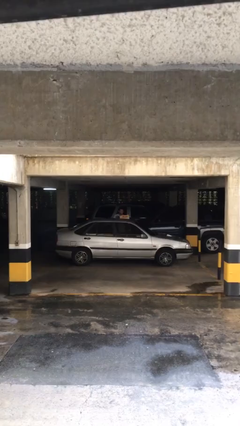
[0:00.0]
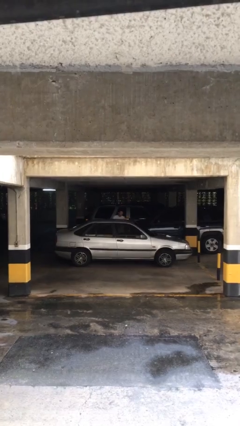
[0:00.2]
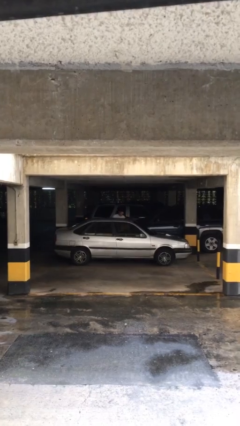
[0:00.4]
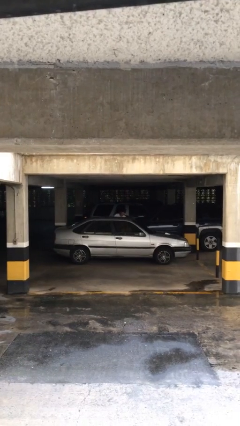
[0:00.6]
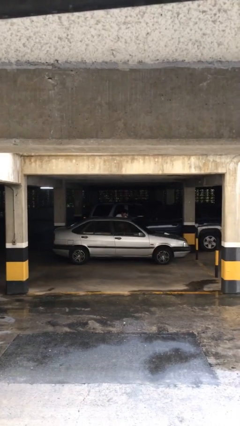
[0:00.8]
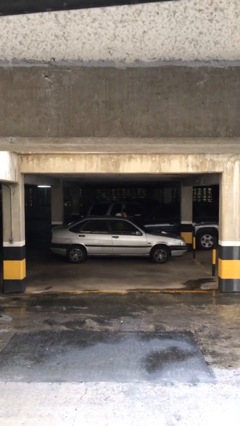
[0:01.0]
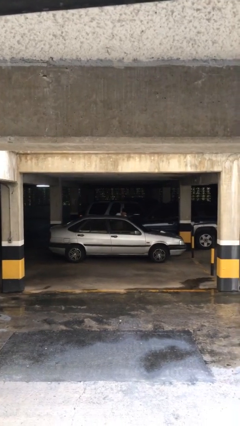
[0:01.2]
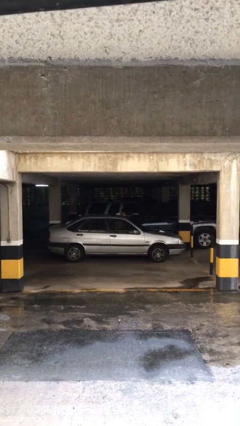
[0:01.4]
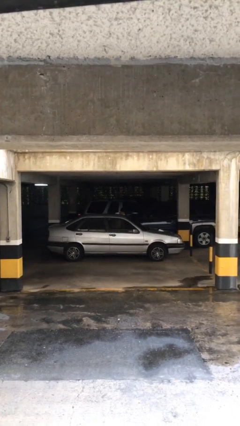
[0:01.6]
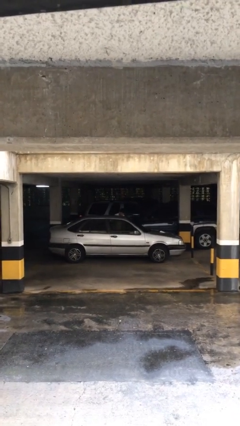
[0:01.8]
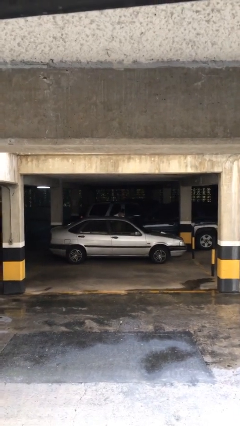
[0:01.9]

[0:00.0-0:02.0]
person loads car

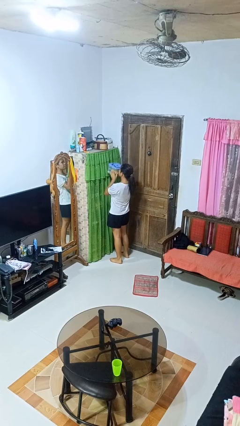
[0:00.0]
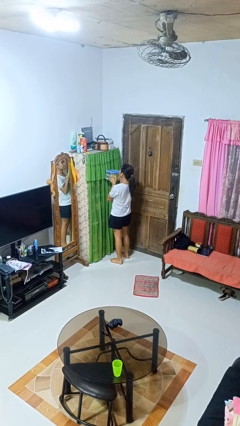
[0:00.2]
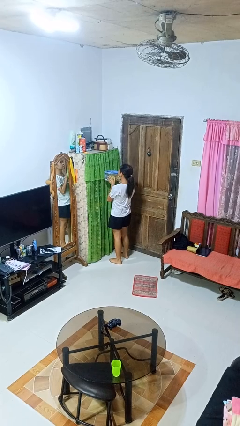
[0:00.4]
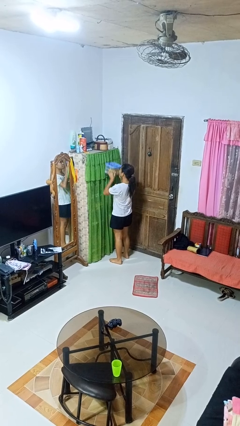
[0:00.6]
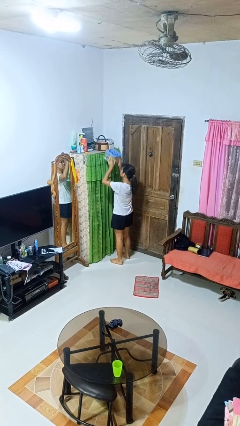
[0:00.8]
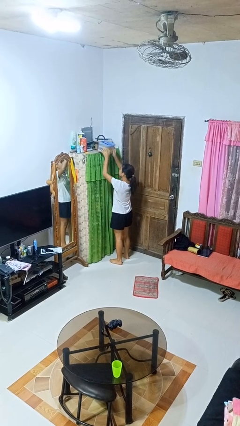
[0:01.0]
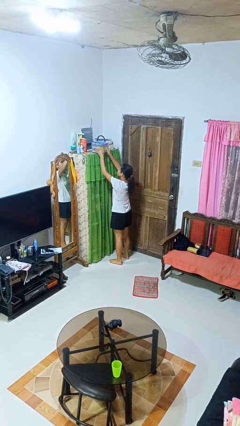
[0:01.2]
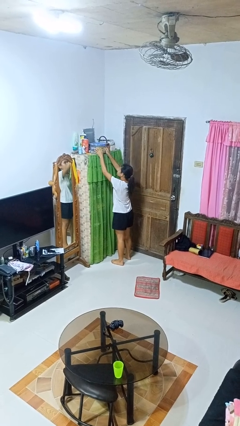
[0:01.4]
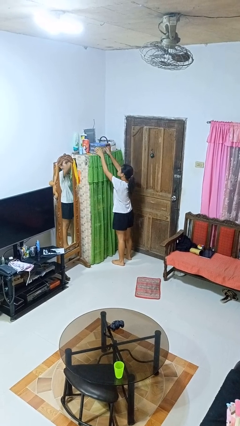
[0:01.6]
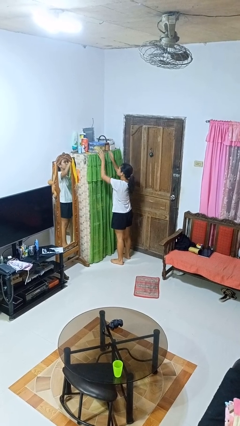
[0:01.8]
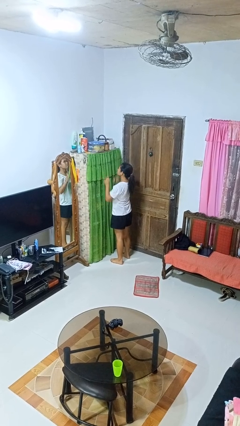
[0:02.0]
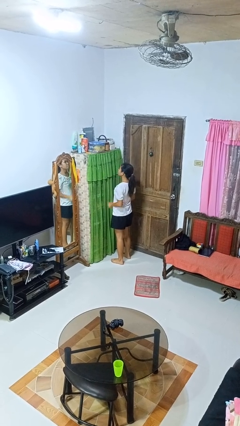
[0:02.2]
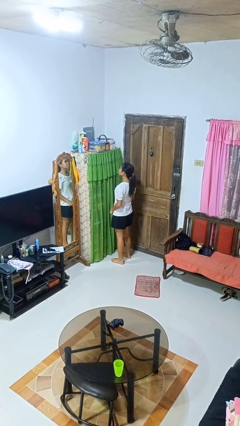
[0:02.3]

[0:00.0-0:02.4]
person puts down object on shelf

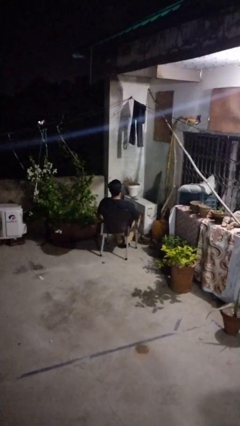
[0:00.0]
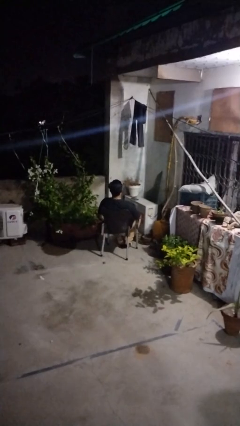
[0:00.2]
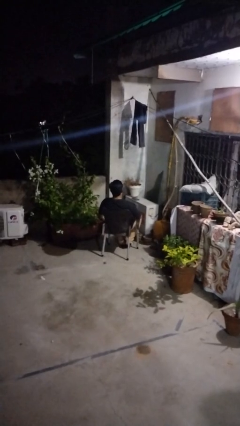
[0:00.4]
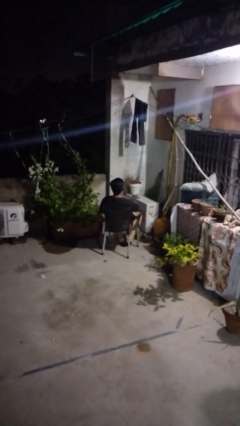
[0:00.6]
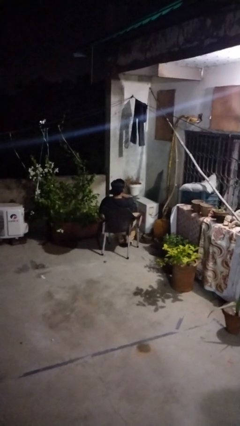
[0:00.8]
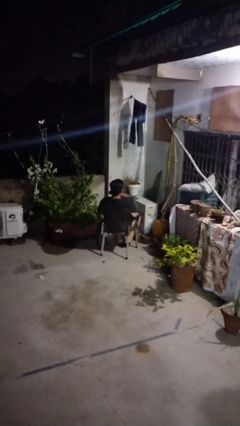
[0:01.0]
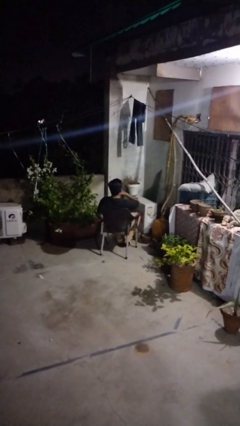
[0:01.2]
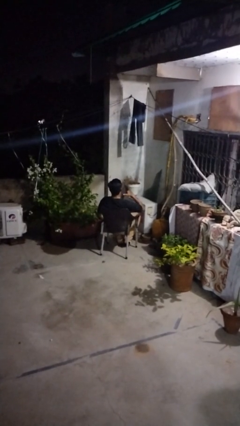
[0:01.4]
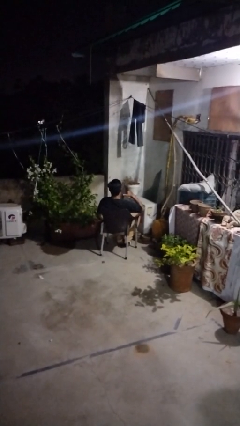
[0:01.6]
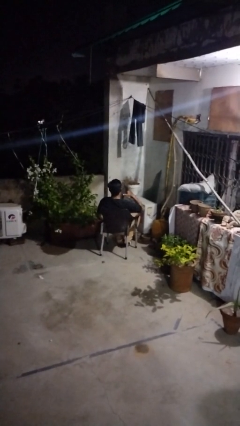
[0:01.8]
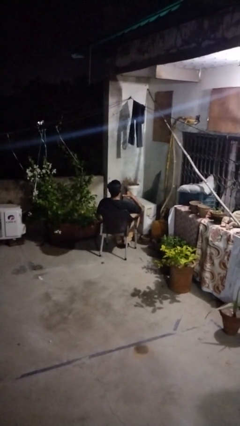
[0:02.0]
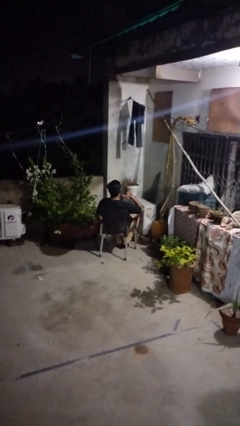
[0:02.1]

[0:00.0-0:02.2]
person gestures cut

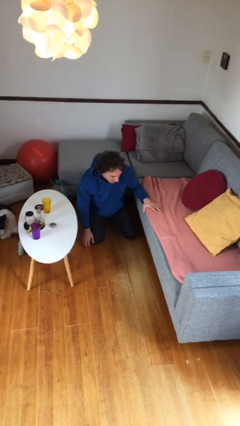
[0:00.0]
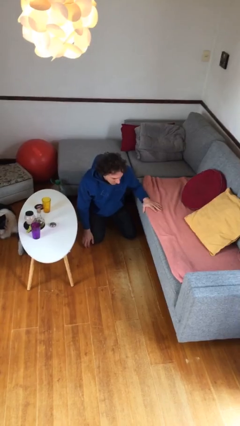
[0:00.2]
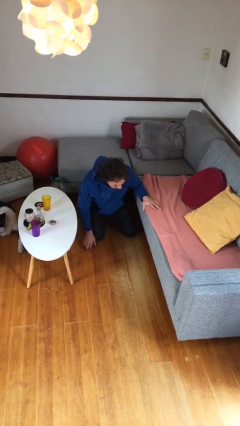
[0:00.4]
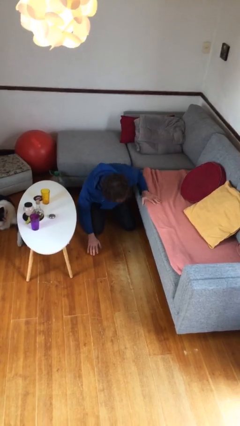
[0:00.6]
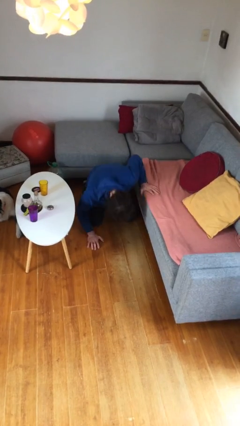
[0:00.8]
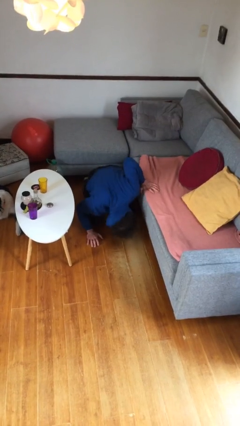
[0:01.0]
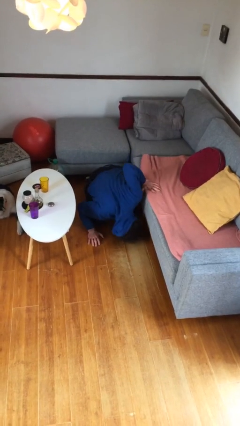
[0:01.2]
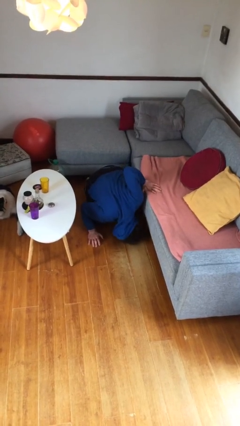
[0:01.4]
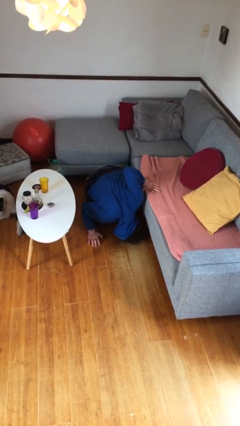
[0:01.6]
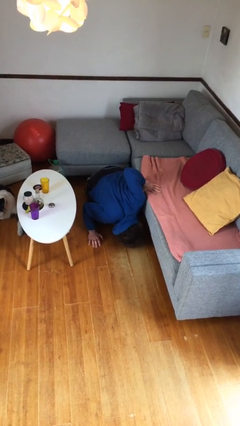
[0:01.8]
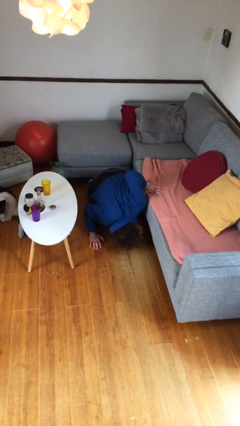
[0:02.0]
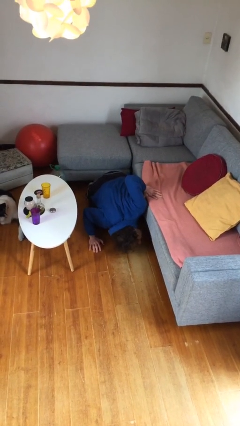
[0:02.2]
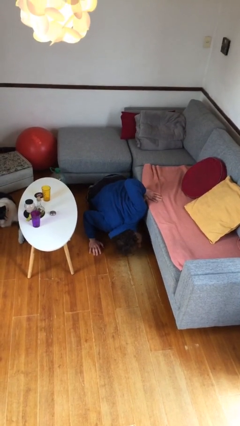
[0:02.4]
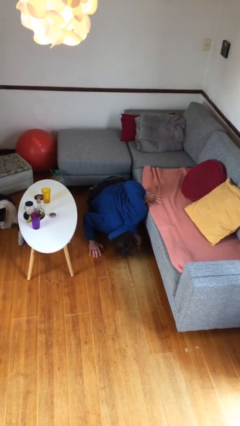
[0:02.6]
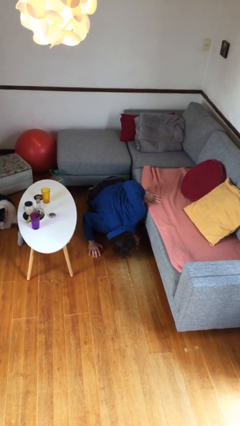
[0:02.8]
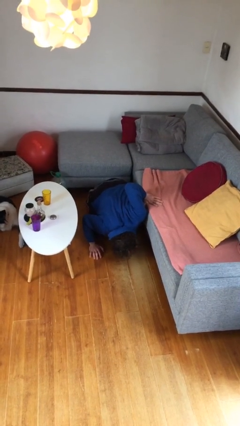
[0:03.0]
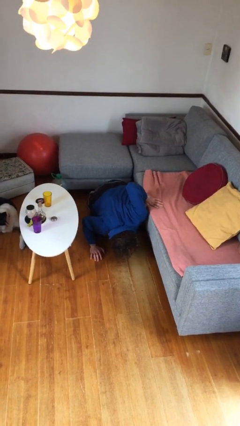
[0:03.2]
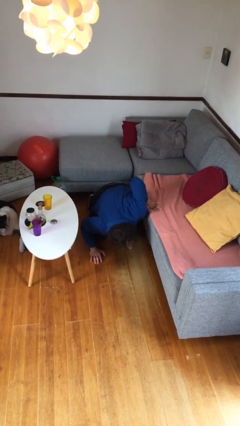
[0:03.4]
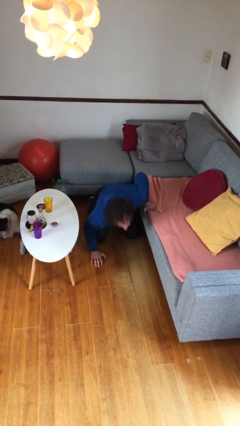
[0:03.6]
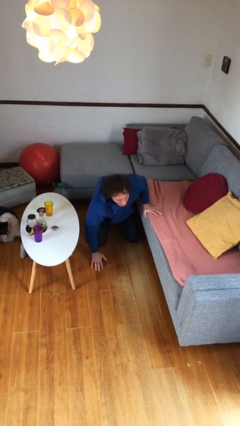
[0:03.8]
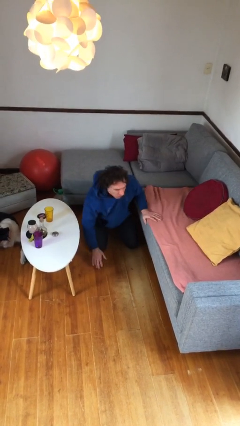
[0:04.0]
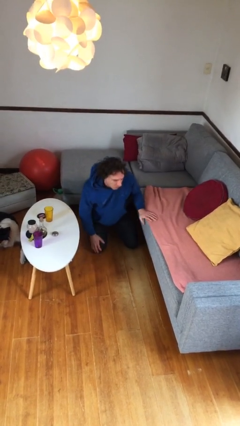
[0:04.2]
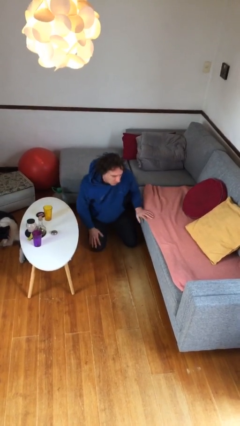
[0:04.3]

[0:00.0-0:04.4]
person searches under couch

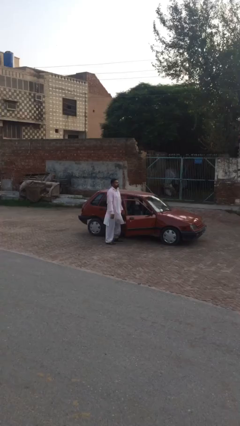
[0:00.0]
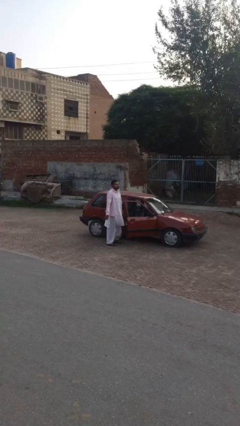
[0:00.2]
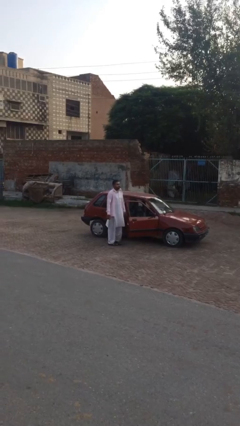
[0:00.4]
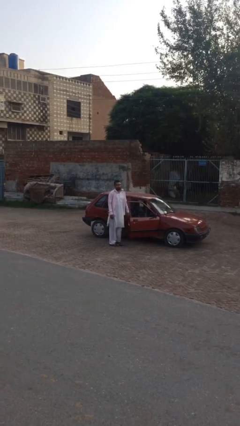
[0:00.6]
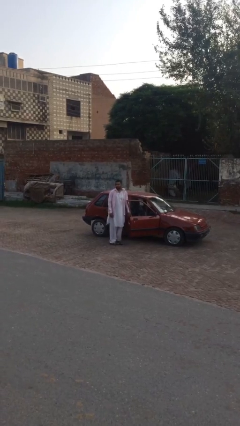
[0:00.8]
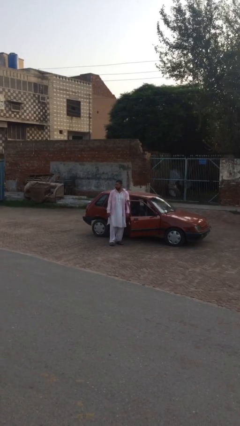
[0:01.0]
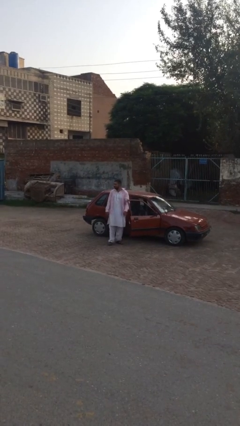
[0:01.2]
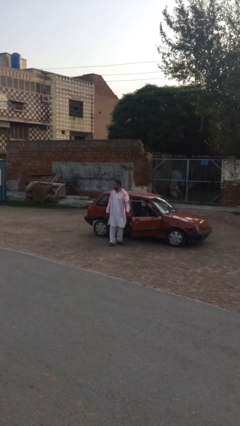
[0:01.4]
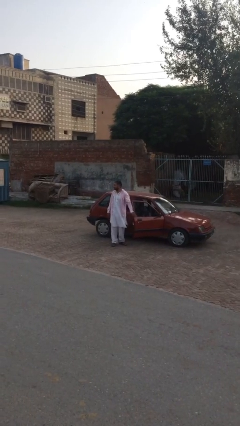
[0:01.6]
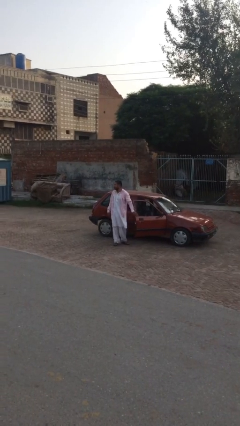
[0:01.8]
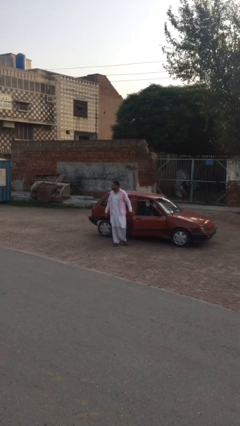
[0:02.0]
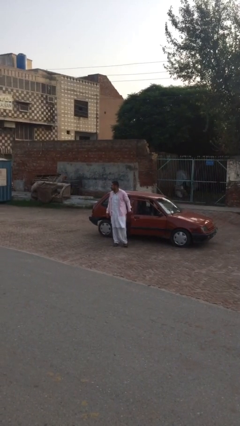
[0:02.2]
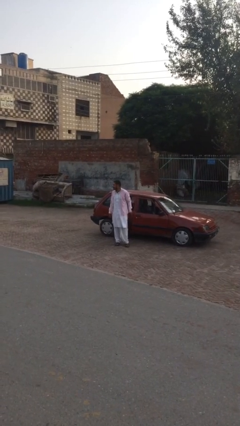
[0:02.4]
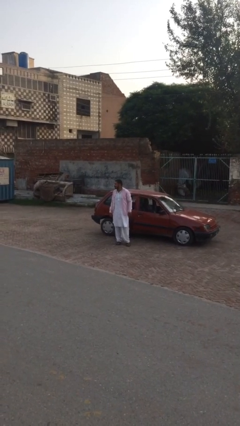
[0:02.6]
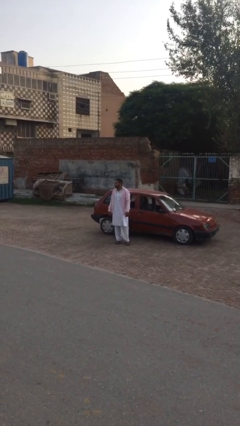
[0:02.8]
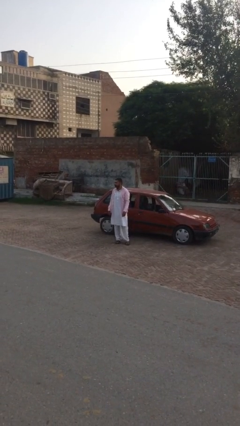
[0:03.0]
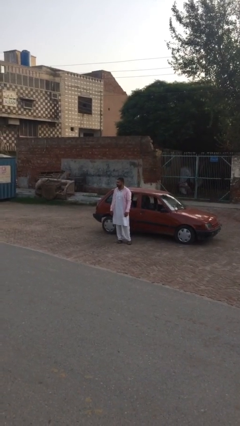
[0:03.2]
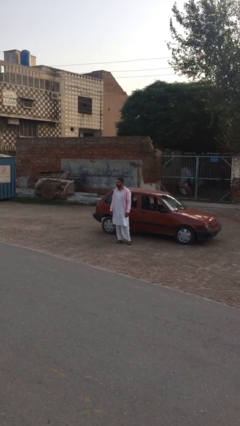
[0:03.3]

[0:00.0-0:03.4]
person closes car door

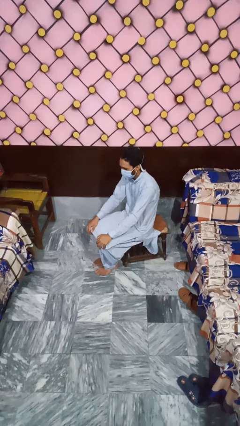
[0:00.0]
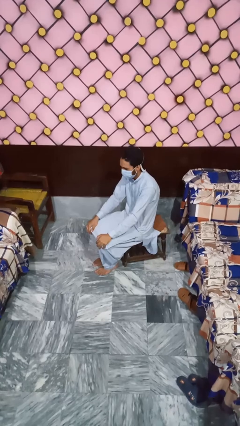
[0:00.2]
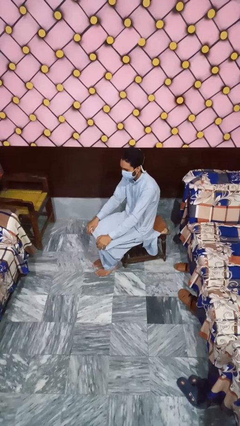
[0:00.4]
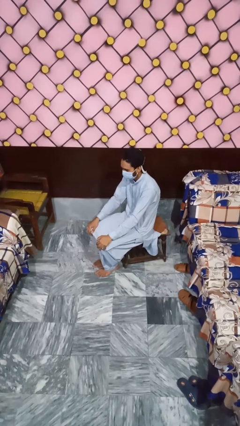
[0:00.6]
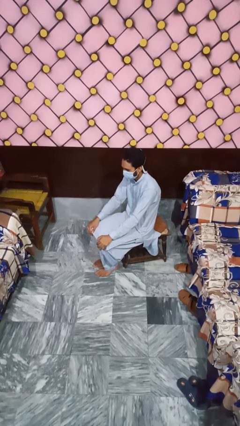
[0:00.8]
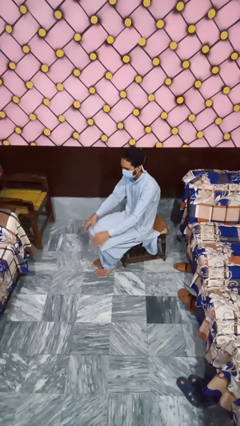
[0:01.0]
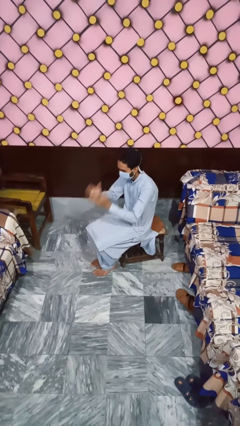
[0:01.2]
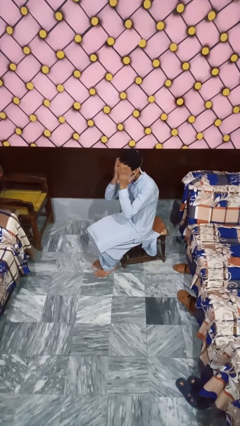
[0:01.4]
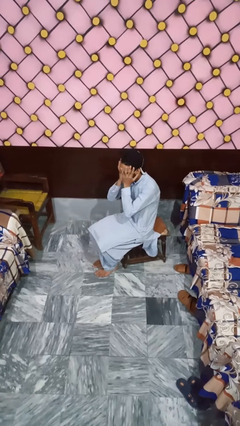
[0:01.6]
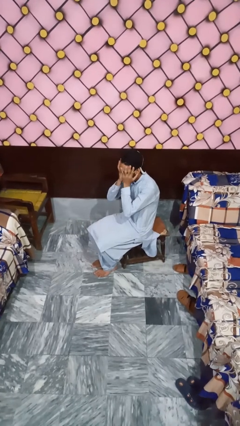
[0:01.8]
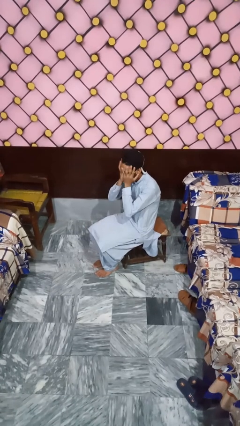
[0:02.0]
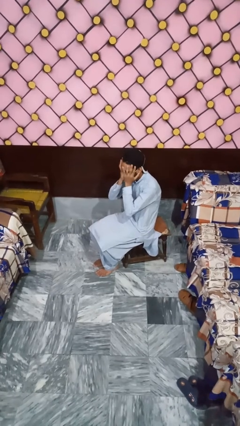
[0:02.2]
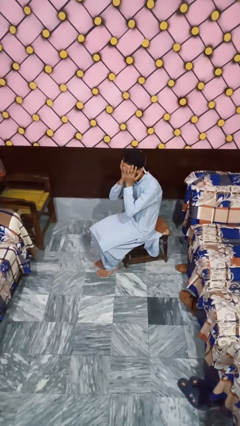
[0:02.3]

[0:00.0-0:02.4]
person covers face with hands

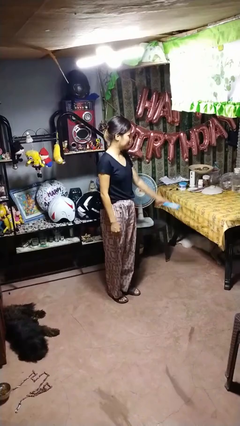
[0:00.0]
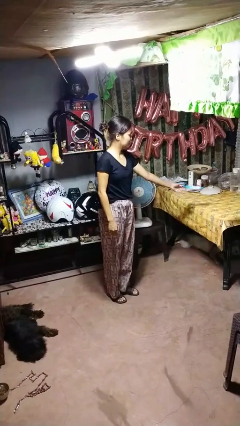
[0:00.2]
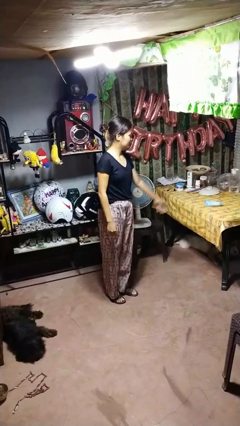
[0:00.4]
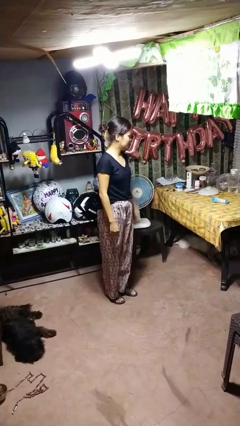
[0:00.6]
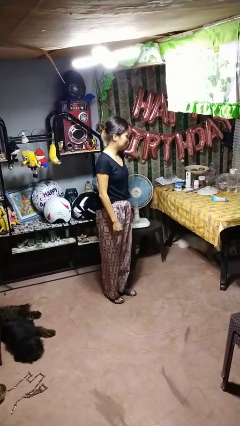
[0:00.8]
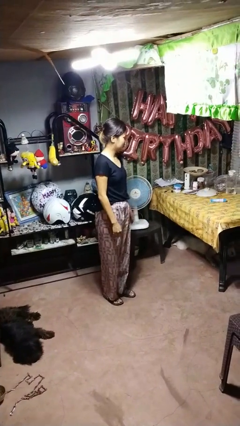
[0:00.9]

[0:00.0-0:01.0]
person throws object on table
